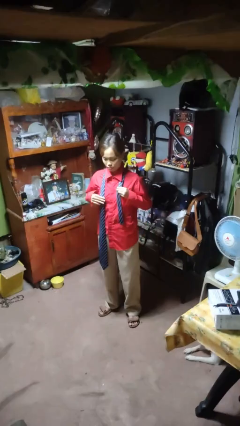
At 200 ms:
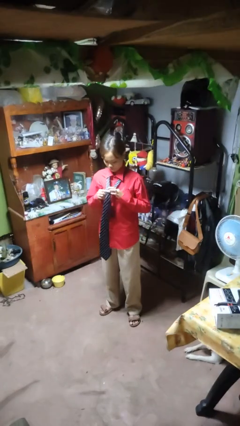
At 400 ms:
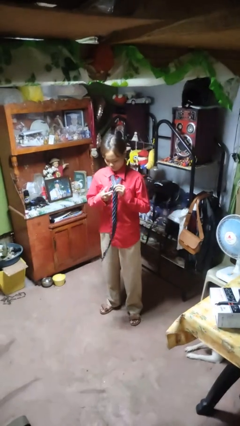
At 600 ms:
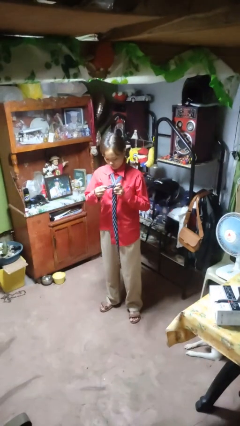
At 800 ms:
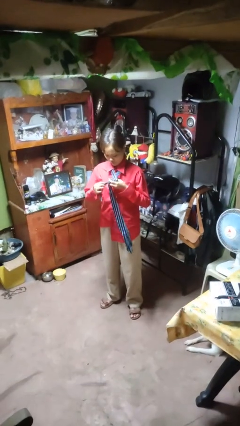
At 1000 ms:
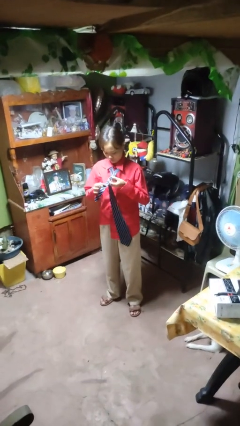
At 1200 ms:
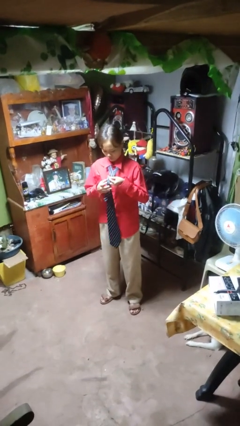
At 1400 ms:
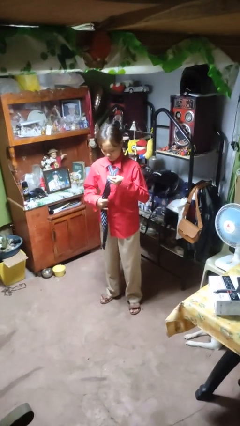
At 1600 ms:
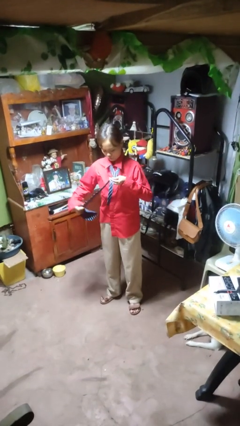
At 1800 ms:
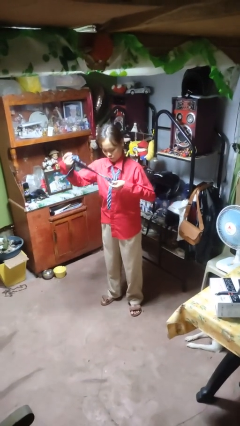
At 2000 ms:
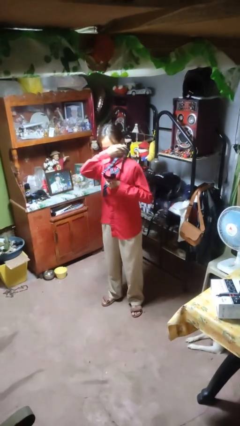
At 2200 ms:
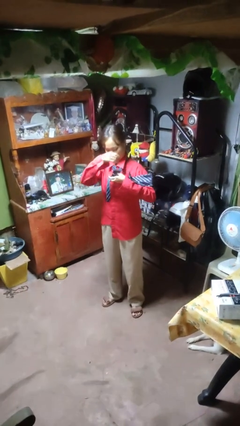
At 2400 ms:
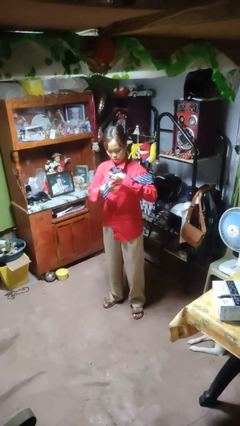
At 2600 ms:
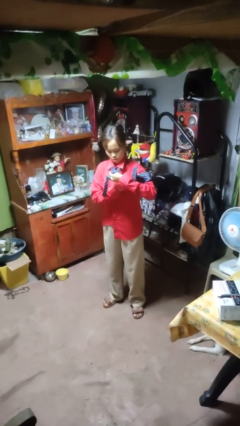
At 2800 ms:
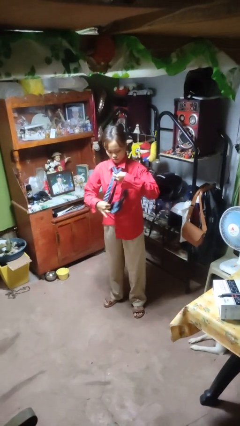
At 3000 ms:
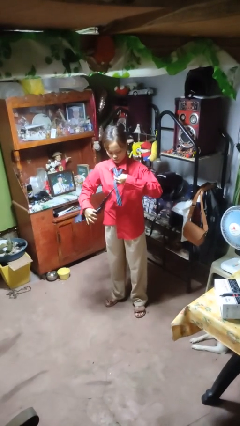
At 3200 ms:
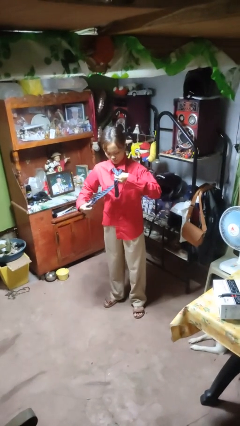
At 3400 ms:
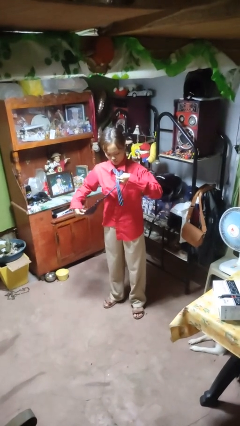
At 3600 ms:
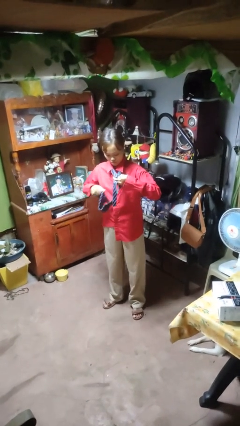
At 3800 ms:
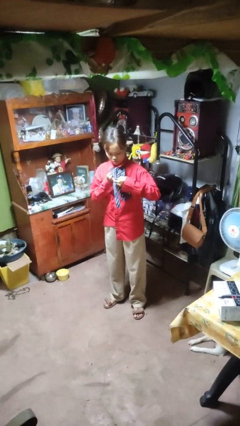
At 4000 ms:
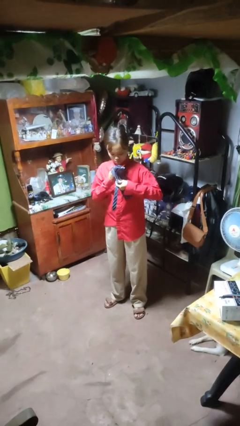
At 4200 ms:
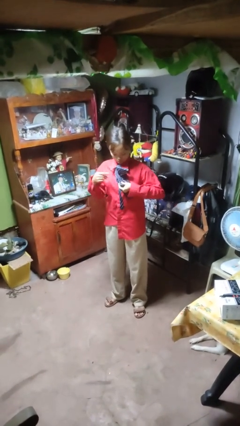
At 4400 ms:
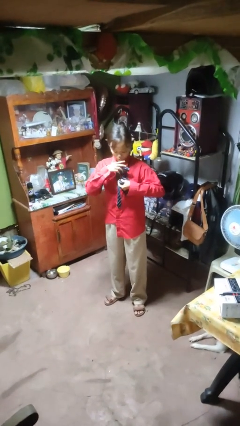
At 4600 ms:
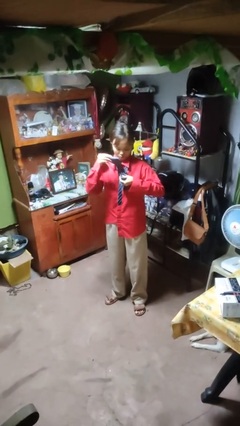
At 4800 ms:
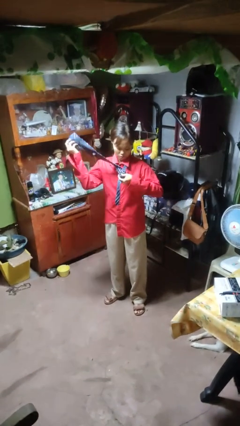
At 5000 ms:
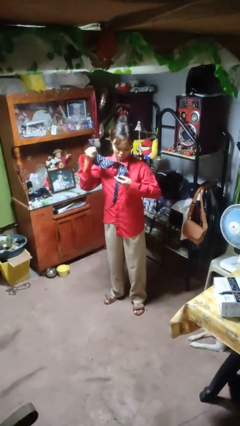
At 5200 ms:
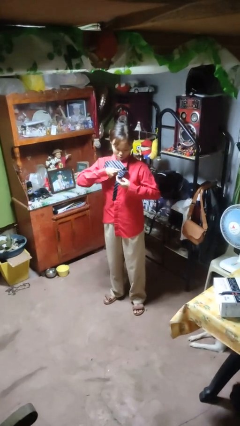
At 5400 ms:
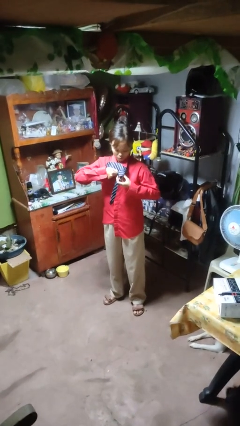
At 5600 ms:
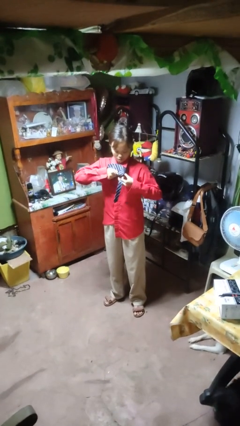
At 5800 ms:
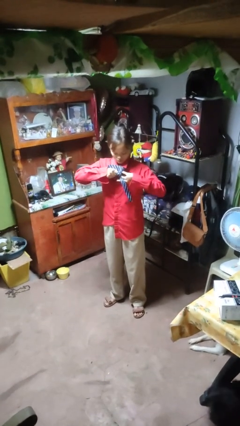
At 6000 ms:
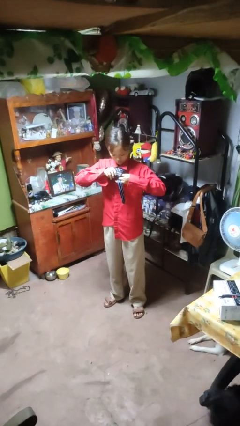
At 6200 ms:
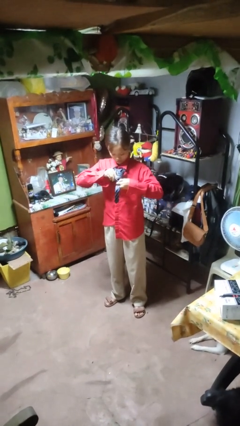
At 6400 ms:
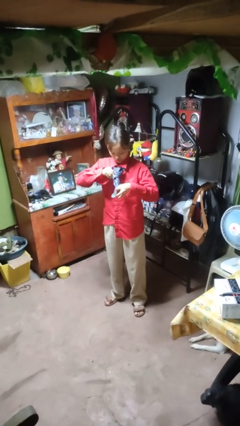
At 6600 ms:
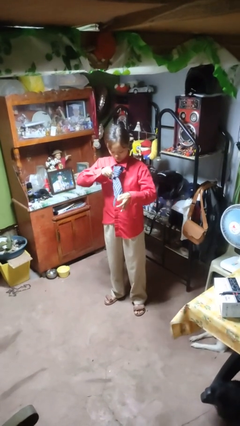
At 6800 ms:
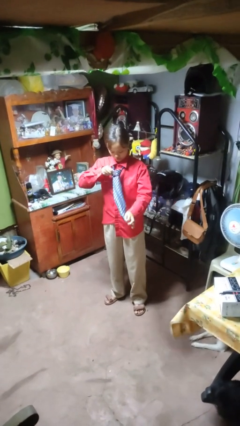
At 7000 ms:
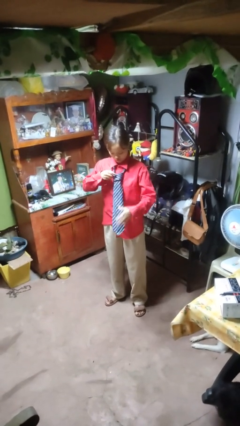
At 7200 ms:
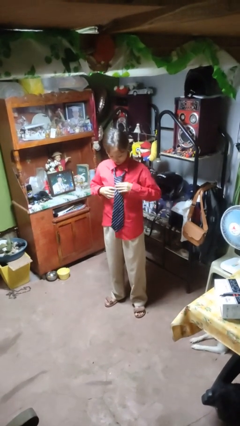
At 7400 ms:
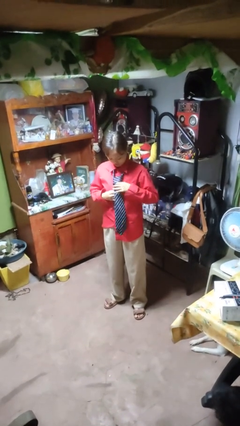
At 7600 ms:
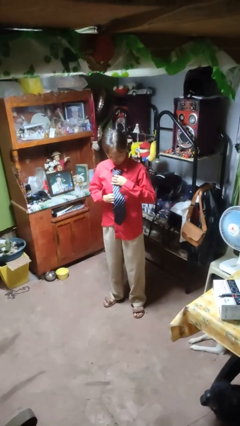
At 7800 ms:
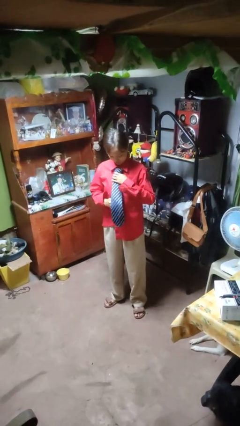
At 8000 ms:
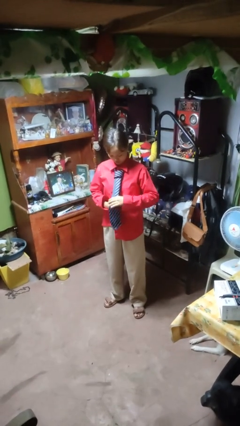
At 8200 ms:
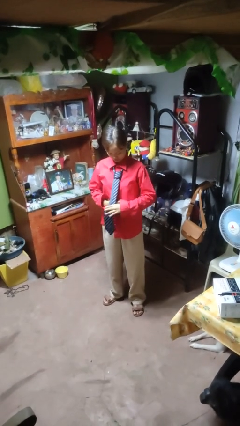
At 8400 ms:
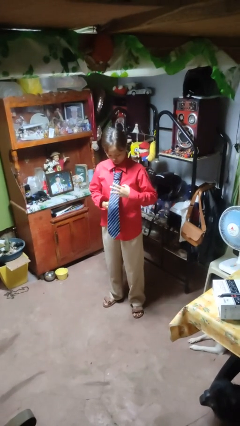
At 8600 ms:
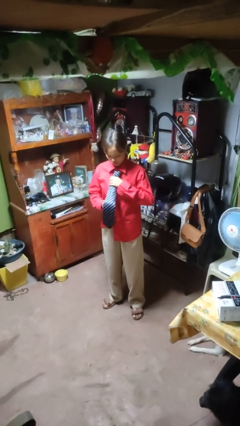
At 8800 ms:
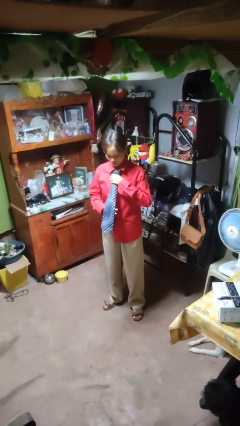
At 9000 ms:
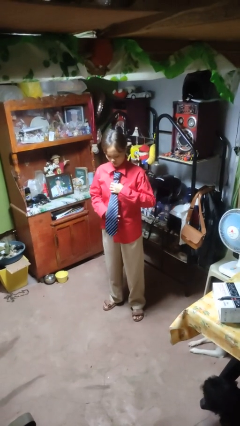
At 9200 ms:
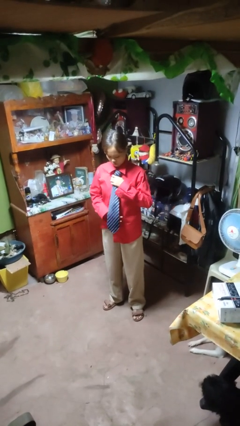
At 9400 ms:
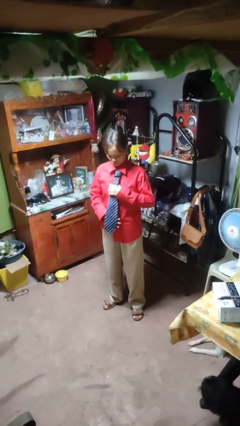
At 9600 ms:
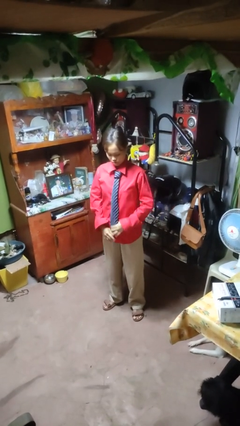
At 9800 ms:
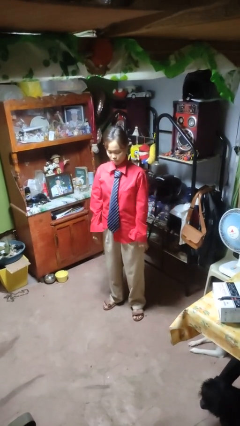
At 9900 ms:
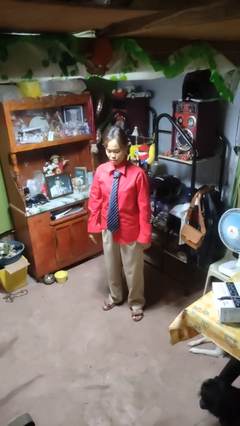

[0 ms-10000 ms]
person puts on necktie

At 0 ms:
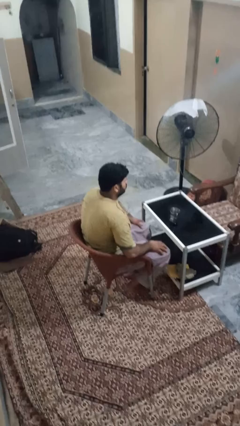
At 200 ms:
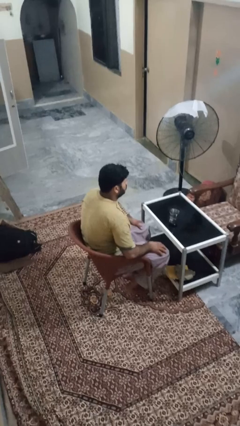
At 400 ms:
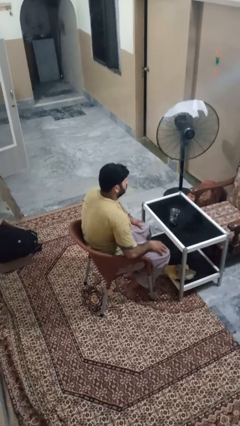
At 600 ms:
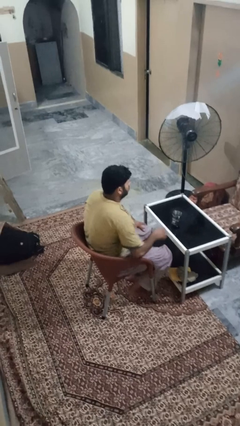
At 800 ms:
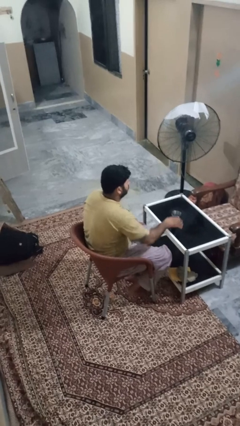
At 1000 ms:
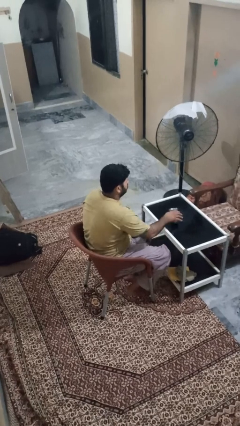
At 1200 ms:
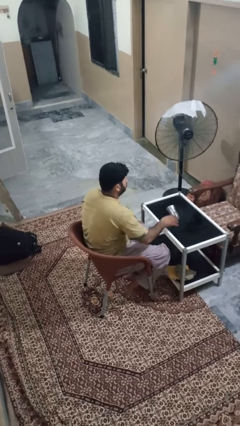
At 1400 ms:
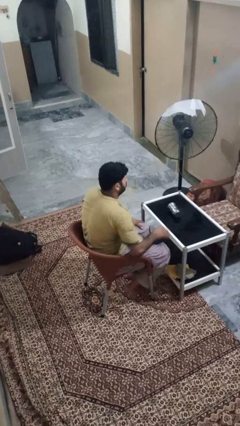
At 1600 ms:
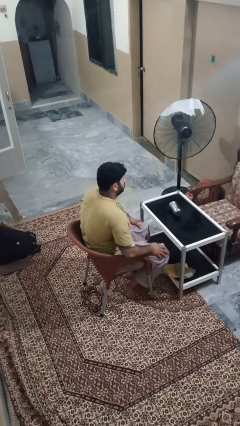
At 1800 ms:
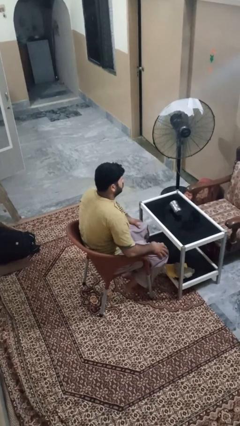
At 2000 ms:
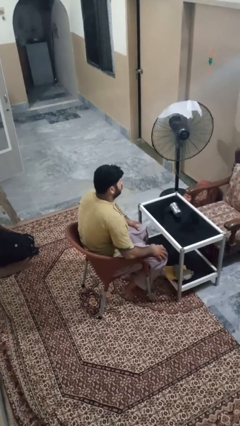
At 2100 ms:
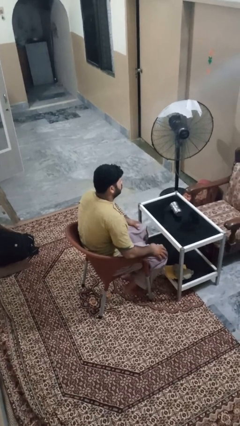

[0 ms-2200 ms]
person knocks over glass

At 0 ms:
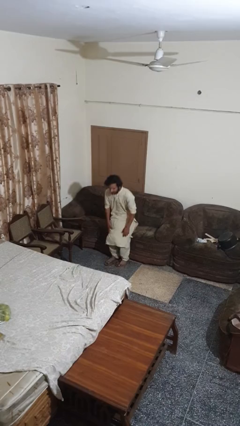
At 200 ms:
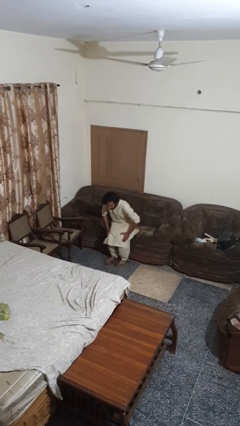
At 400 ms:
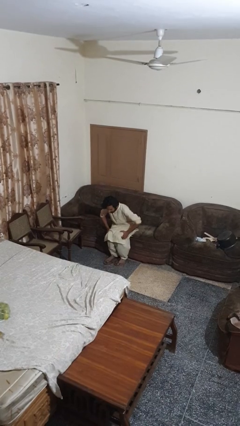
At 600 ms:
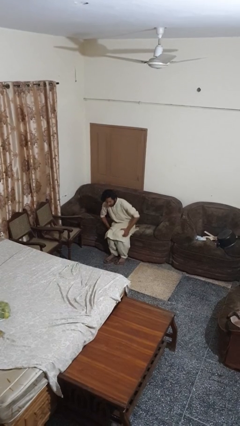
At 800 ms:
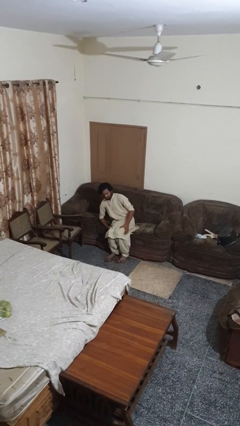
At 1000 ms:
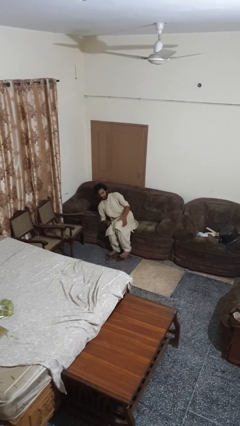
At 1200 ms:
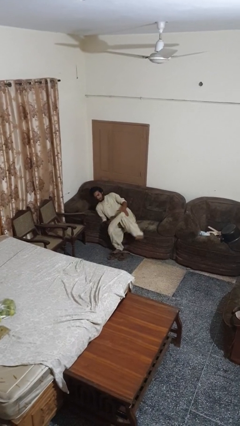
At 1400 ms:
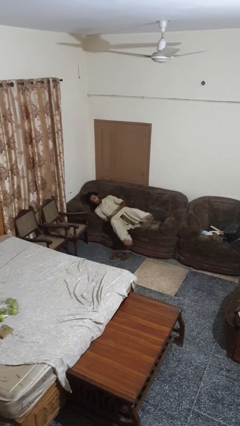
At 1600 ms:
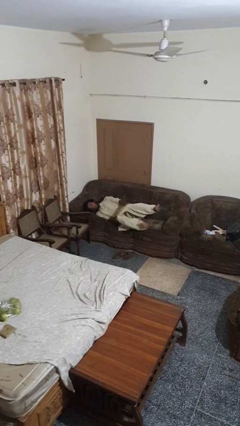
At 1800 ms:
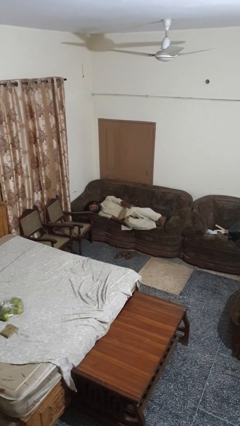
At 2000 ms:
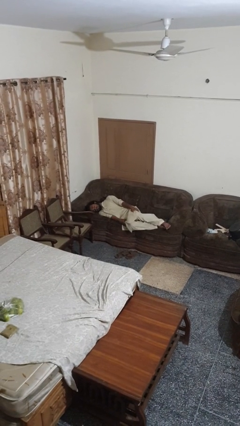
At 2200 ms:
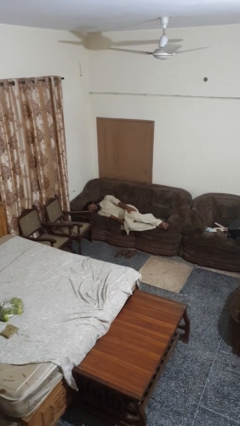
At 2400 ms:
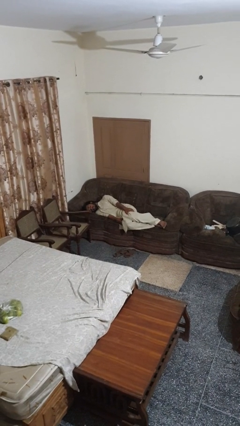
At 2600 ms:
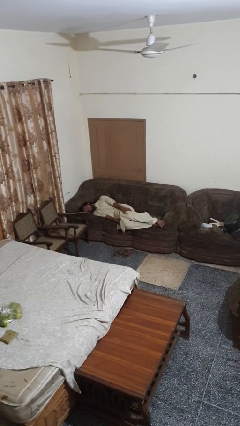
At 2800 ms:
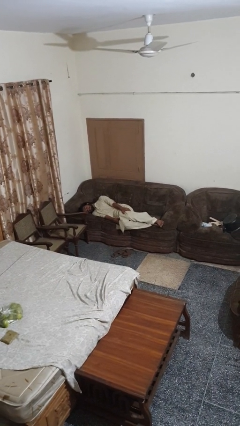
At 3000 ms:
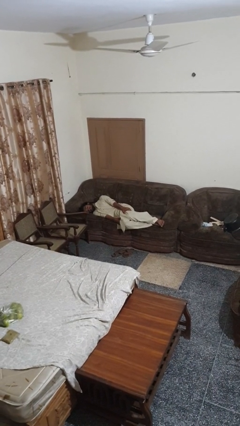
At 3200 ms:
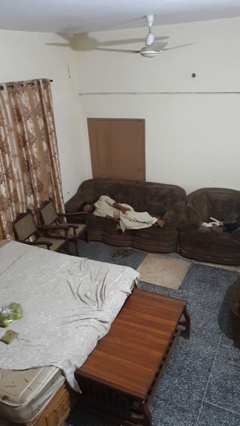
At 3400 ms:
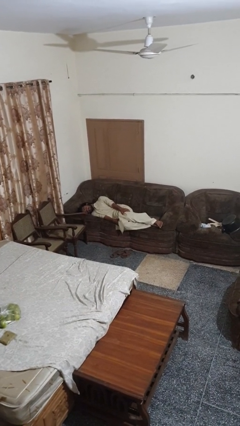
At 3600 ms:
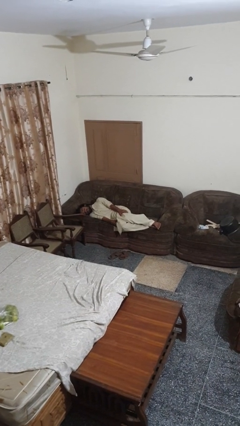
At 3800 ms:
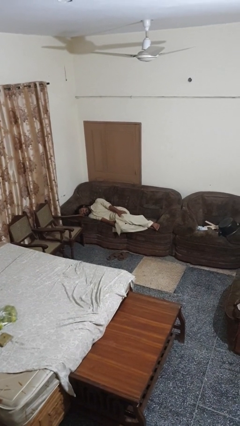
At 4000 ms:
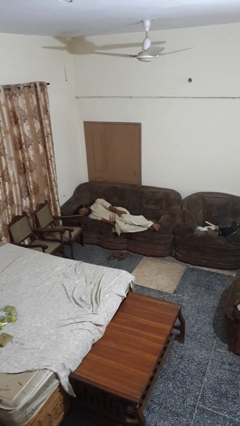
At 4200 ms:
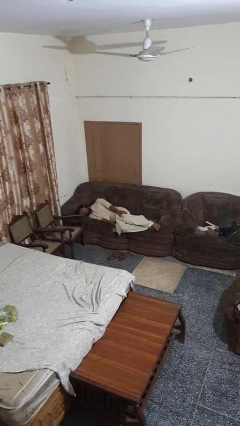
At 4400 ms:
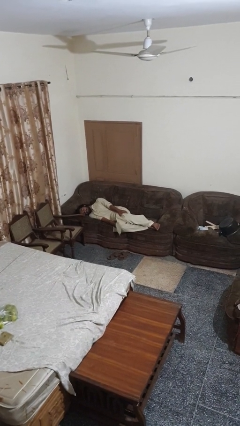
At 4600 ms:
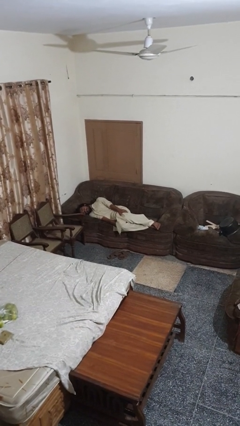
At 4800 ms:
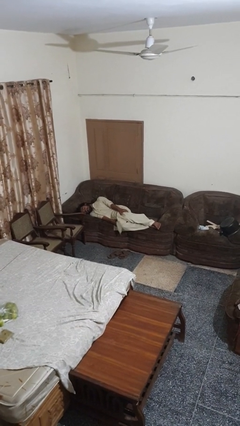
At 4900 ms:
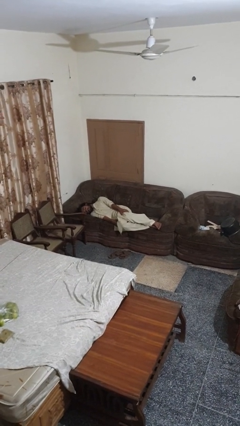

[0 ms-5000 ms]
person lies down on couch

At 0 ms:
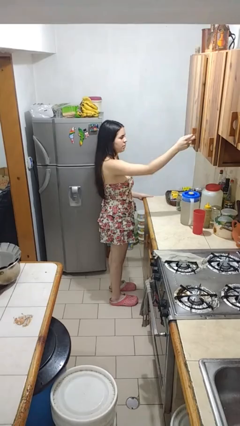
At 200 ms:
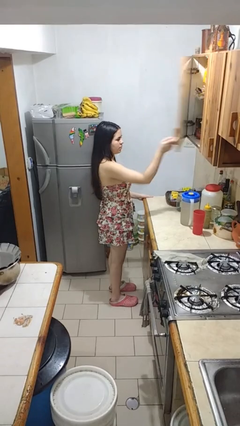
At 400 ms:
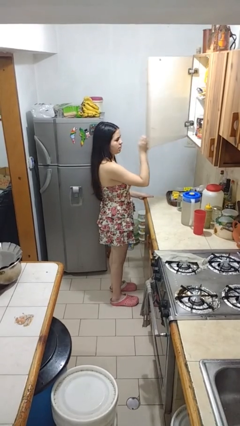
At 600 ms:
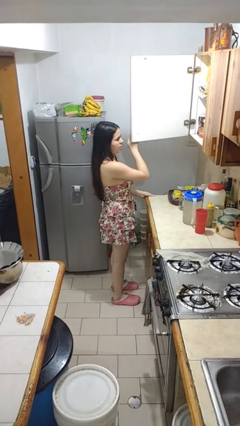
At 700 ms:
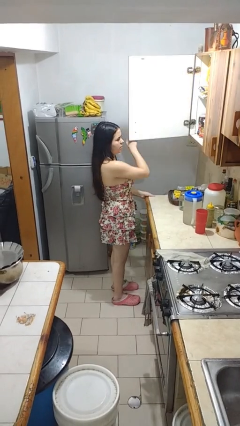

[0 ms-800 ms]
person opens cabinet
